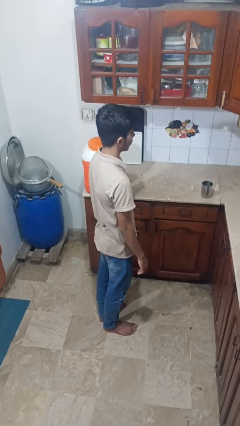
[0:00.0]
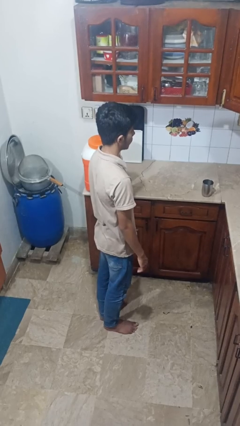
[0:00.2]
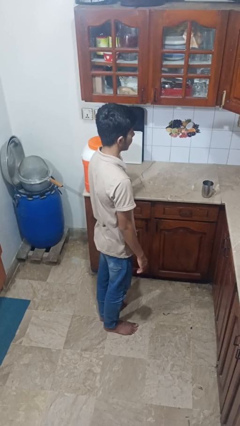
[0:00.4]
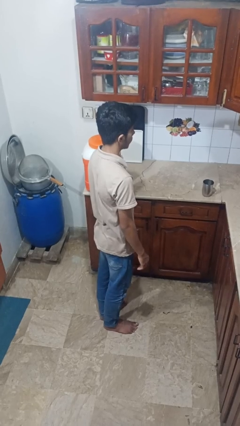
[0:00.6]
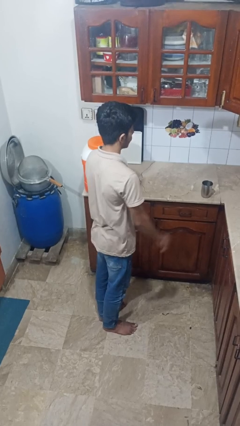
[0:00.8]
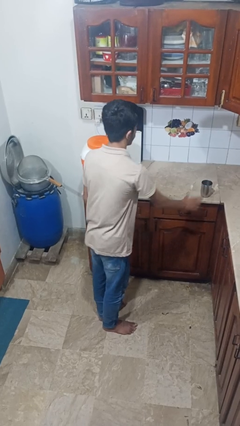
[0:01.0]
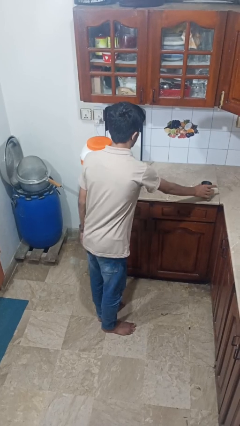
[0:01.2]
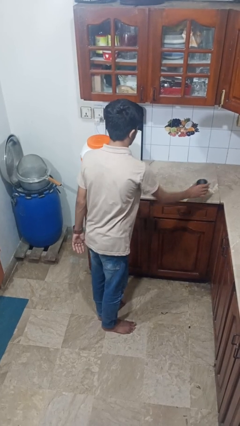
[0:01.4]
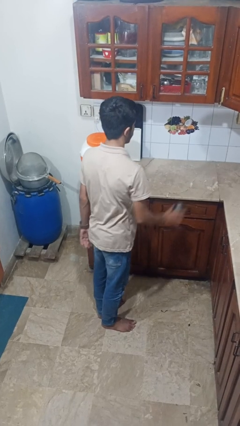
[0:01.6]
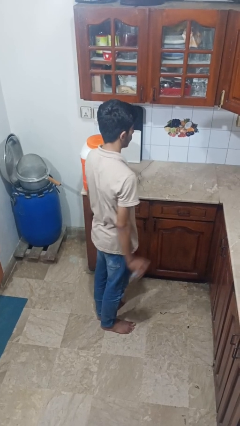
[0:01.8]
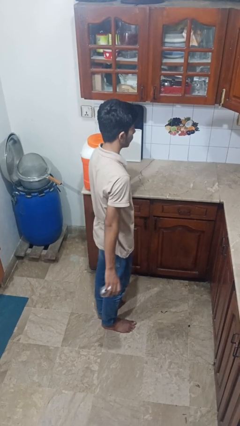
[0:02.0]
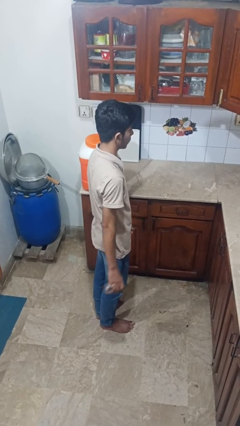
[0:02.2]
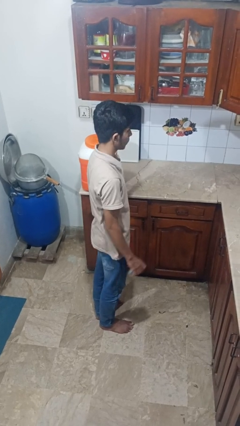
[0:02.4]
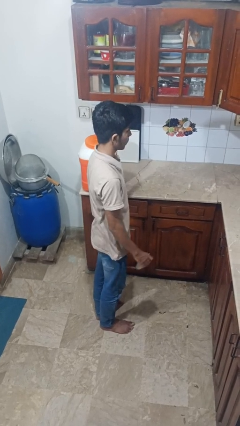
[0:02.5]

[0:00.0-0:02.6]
person picks up object from countertop

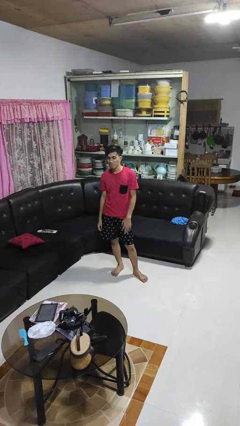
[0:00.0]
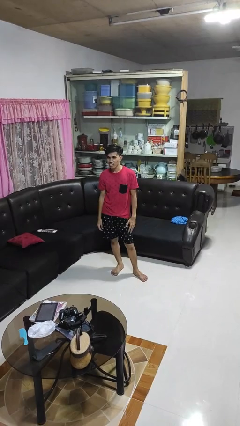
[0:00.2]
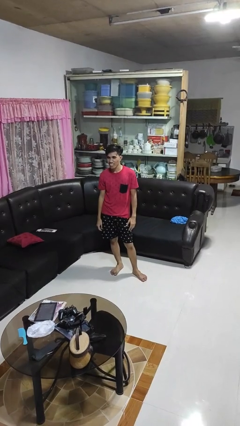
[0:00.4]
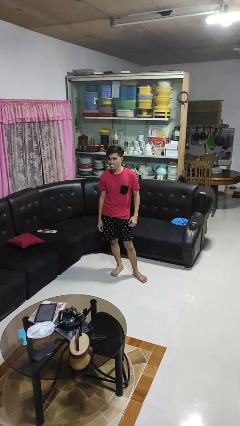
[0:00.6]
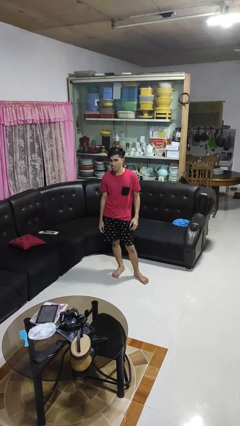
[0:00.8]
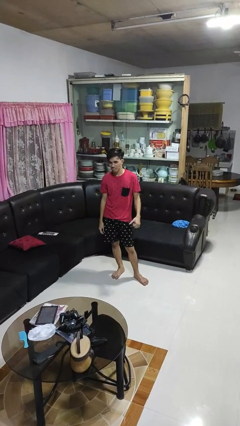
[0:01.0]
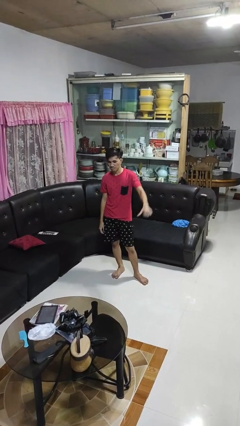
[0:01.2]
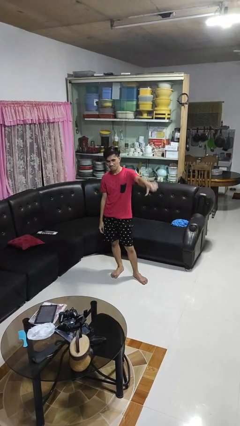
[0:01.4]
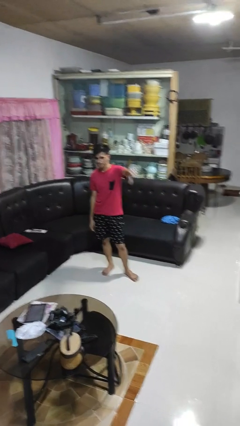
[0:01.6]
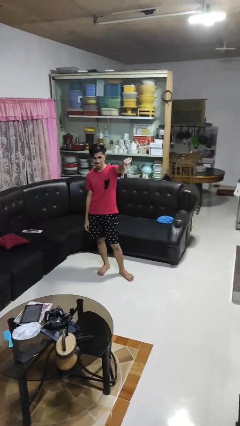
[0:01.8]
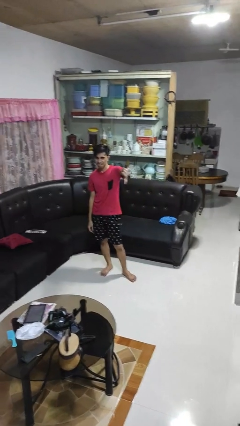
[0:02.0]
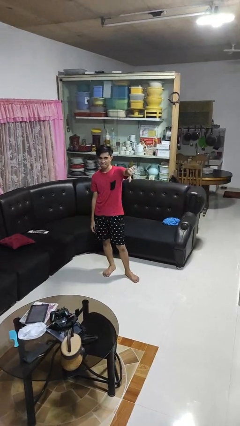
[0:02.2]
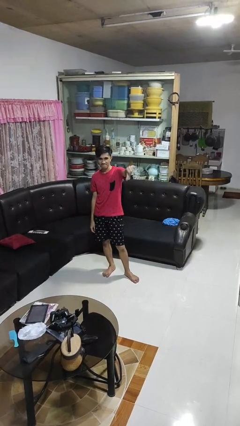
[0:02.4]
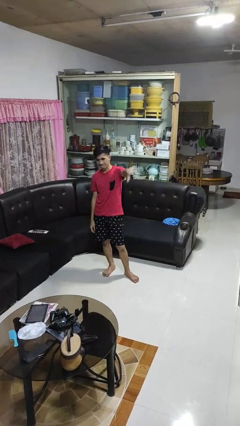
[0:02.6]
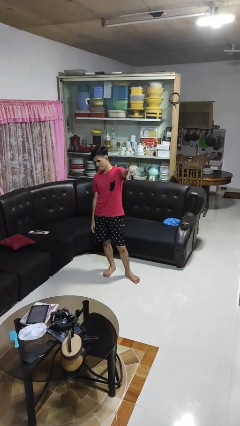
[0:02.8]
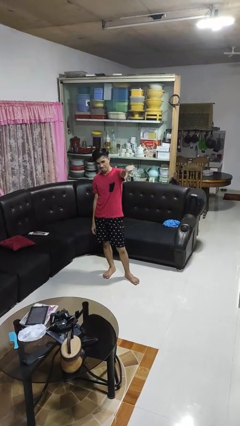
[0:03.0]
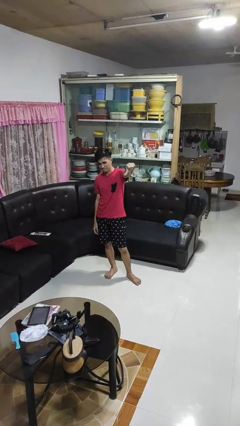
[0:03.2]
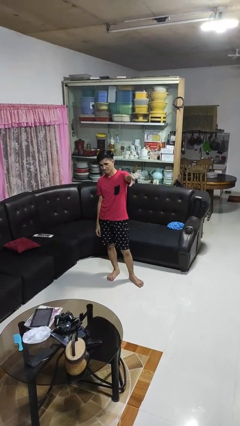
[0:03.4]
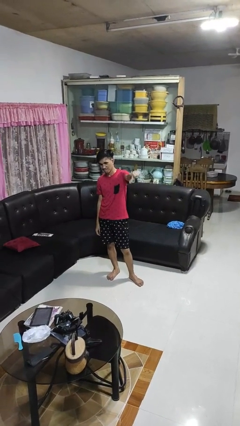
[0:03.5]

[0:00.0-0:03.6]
person gestures thumbs down

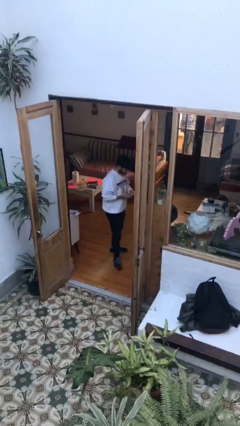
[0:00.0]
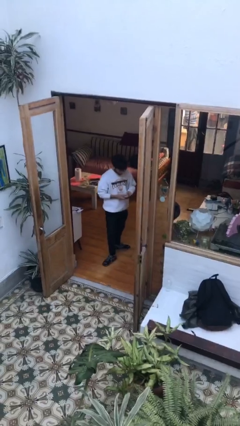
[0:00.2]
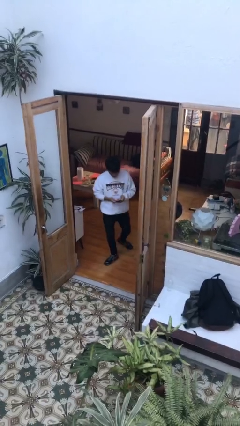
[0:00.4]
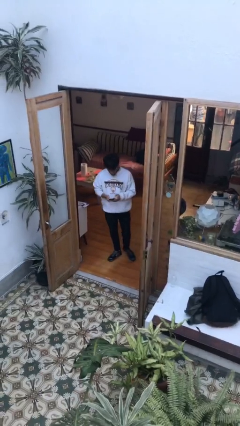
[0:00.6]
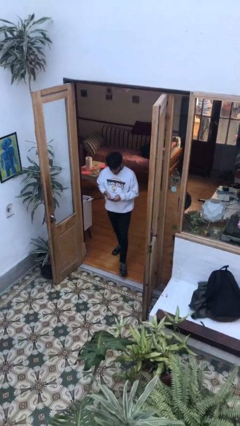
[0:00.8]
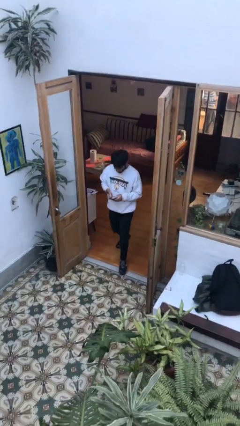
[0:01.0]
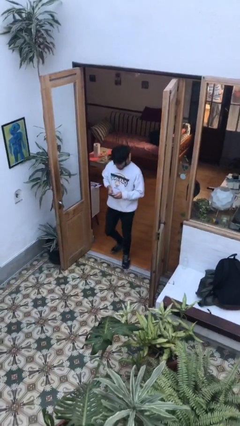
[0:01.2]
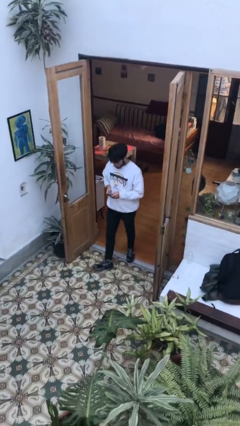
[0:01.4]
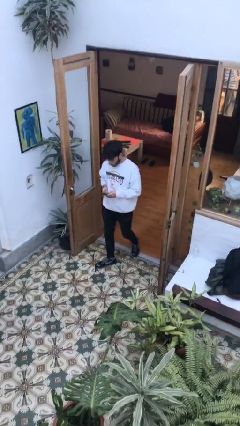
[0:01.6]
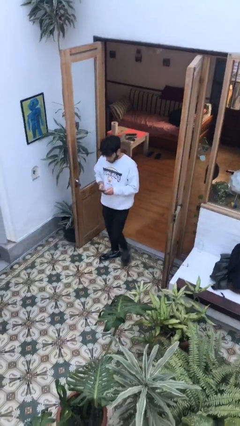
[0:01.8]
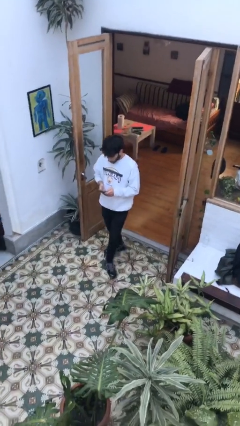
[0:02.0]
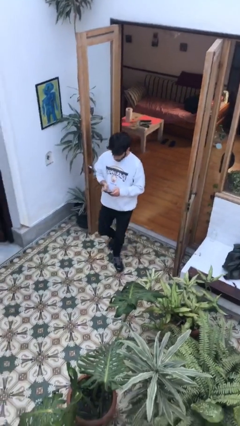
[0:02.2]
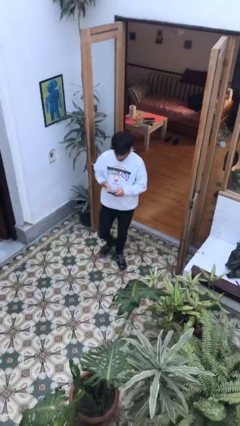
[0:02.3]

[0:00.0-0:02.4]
person enters scene through structure

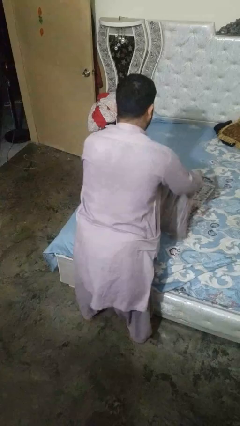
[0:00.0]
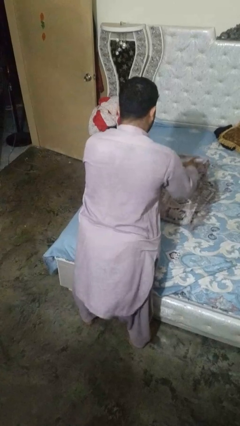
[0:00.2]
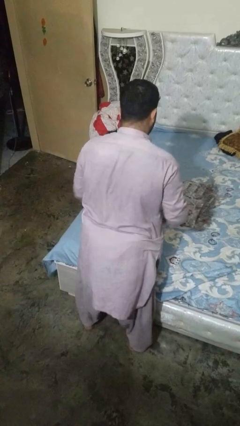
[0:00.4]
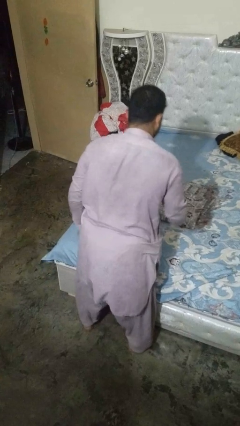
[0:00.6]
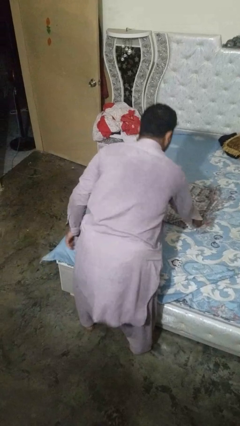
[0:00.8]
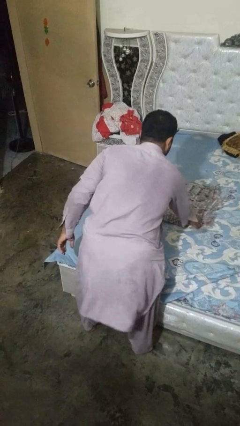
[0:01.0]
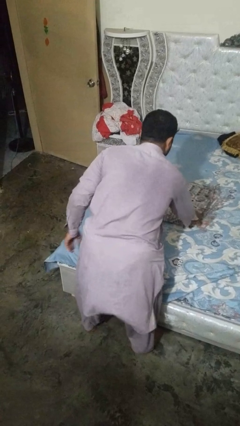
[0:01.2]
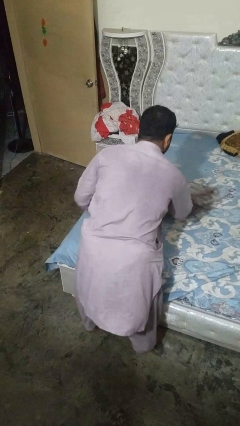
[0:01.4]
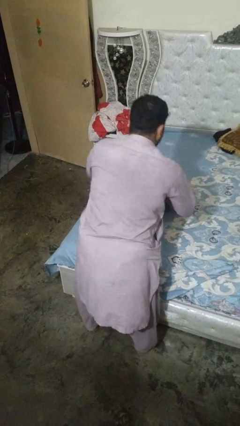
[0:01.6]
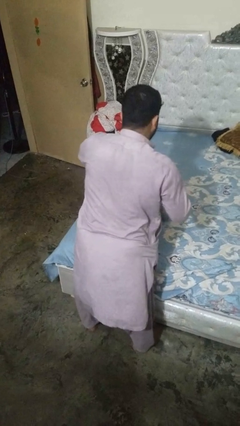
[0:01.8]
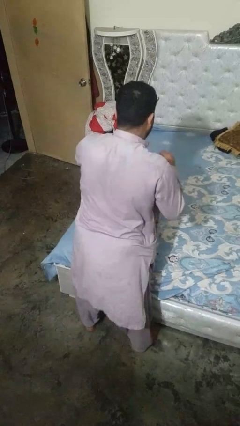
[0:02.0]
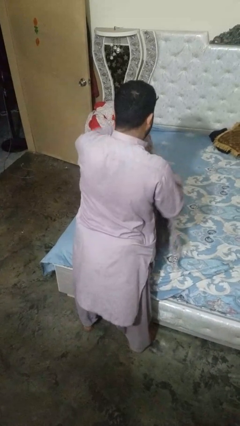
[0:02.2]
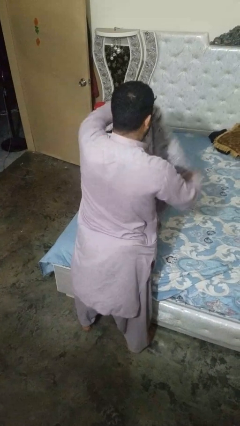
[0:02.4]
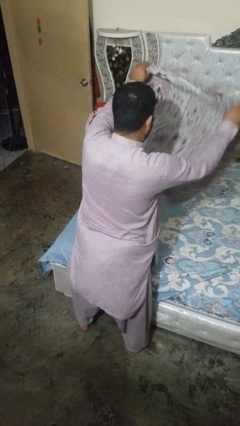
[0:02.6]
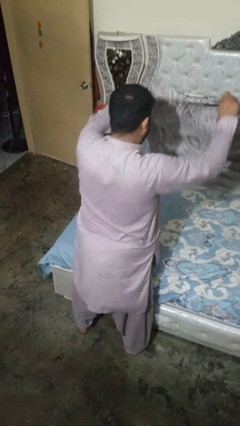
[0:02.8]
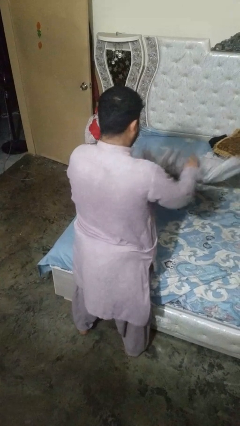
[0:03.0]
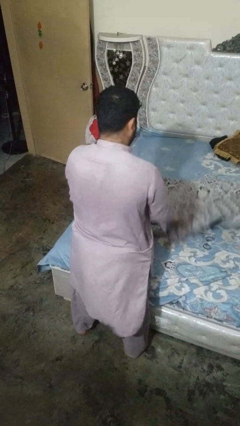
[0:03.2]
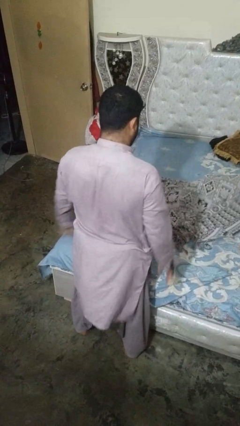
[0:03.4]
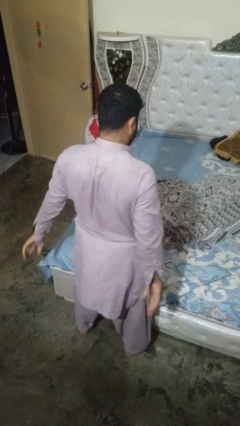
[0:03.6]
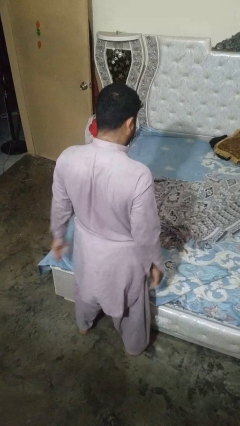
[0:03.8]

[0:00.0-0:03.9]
person unfolds blanket

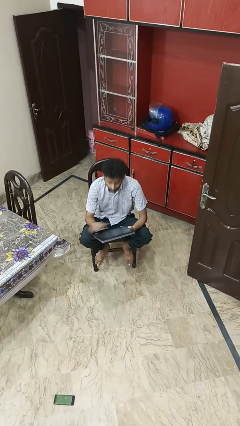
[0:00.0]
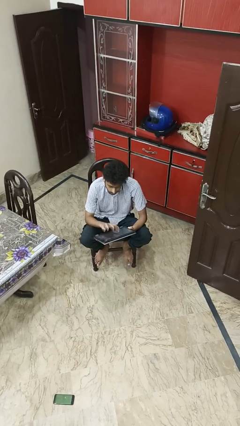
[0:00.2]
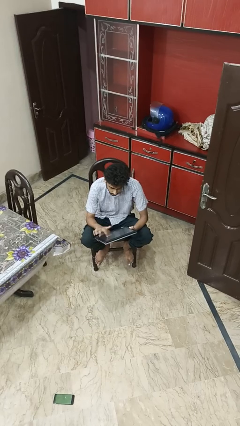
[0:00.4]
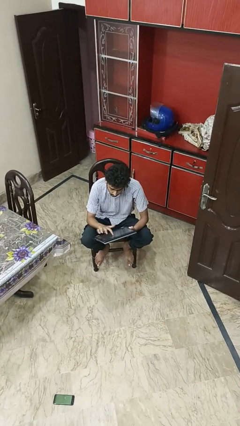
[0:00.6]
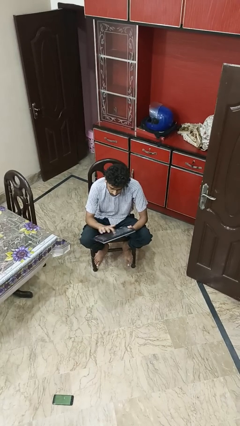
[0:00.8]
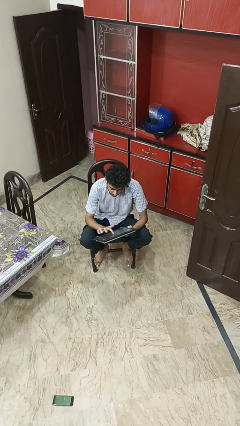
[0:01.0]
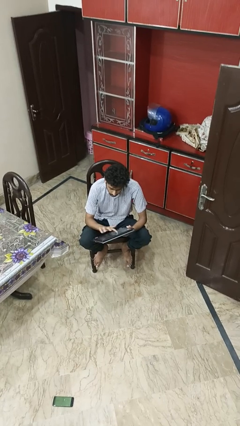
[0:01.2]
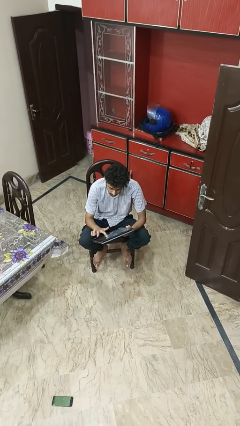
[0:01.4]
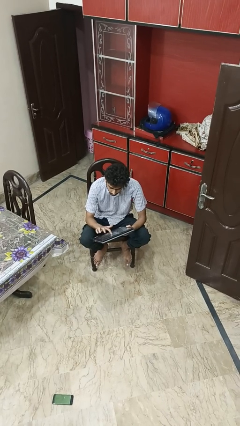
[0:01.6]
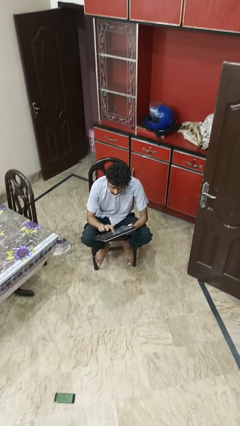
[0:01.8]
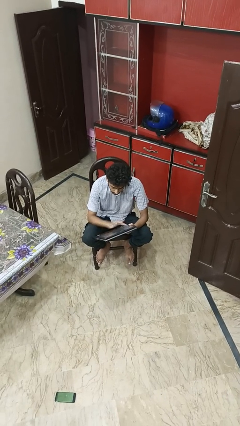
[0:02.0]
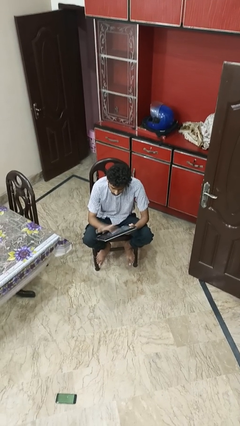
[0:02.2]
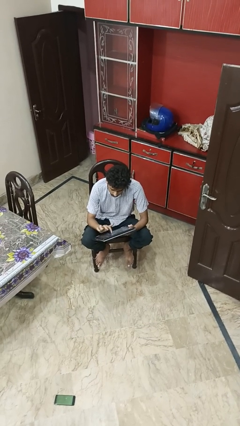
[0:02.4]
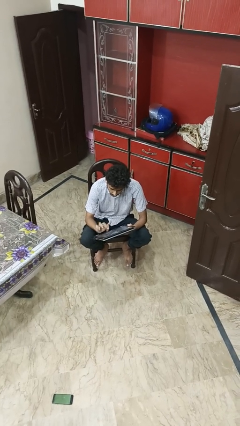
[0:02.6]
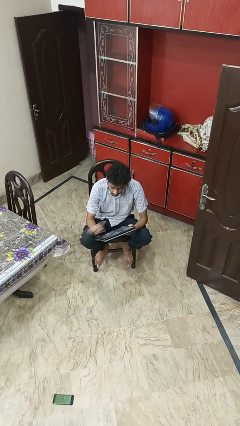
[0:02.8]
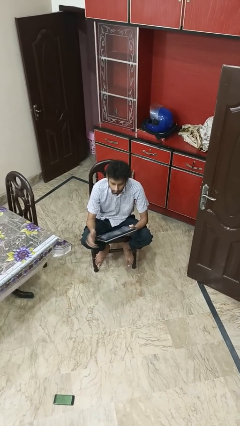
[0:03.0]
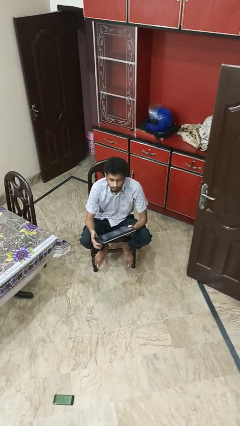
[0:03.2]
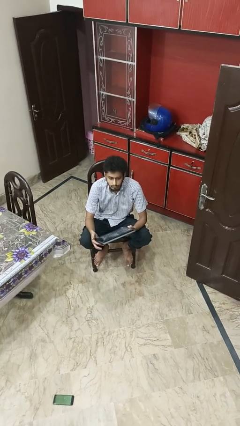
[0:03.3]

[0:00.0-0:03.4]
person interacts with tablet

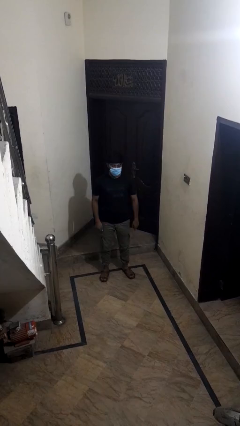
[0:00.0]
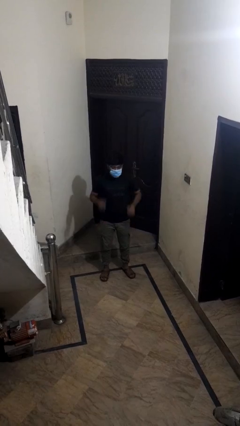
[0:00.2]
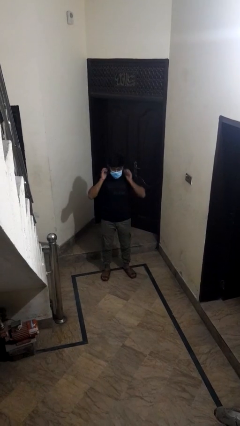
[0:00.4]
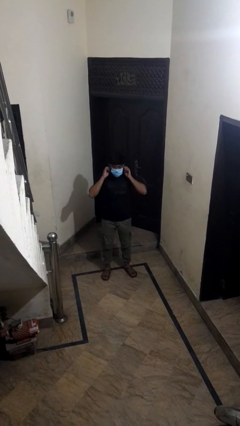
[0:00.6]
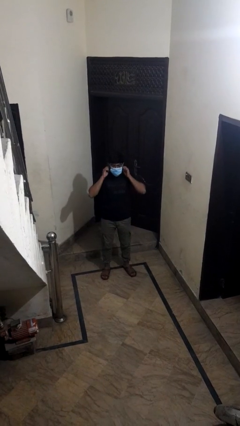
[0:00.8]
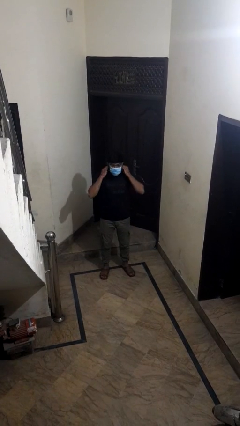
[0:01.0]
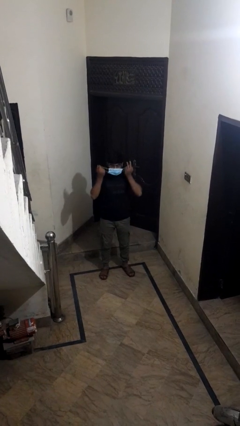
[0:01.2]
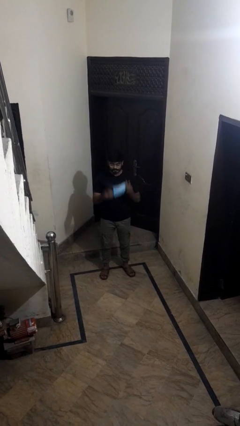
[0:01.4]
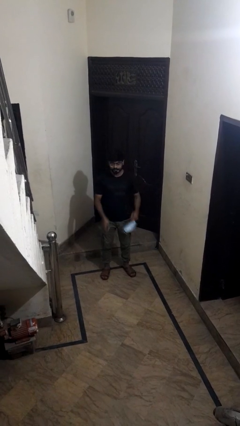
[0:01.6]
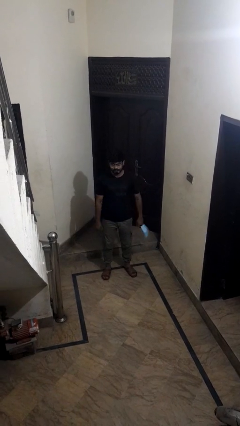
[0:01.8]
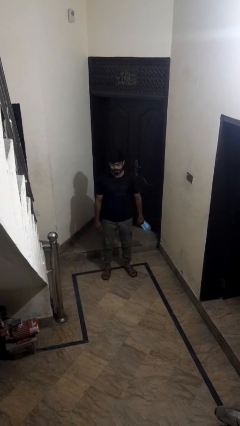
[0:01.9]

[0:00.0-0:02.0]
person takes off facemask
